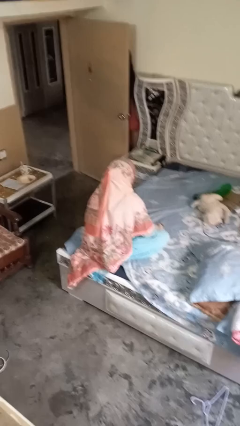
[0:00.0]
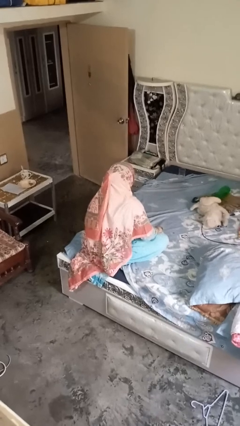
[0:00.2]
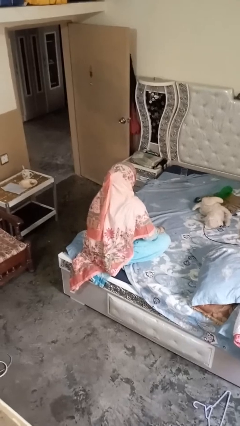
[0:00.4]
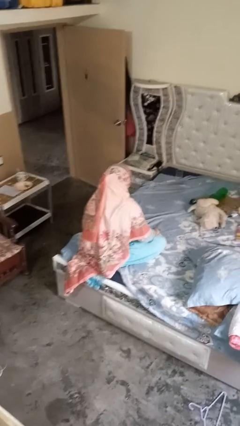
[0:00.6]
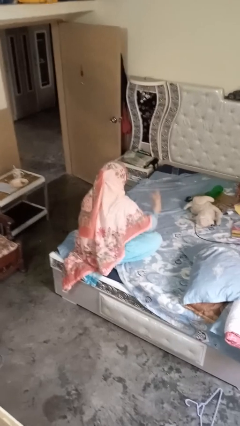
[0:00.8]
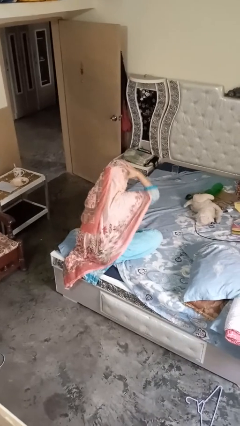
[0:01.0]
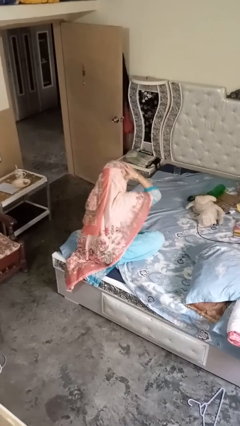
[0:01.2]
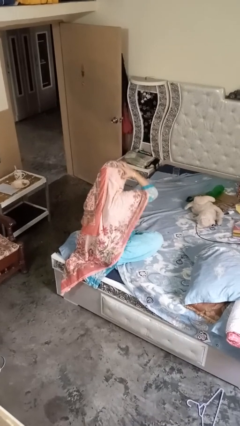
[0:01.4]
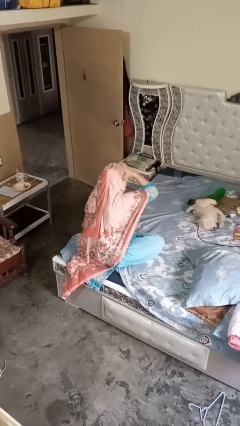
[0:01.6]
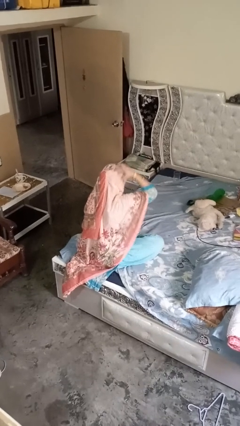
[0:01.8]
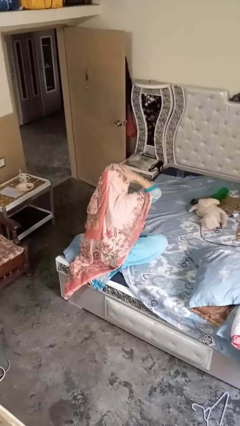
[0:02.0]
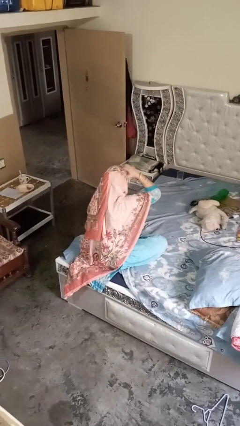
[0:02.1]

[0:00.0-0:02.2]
person strokes hair

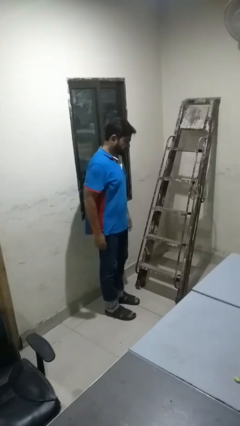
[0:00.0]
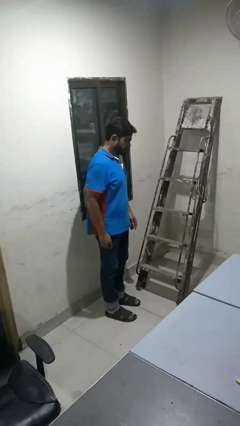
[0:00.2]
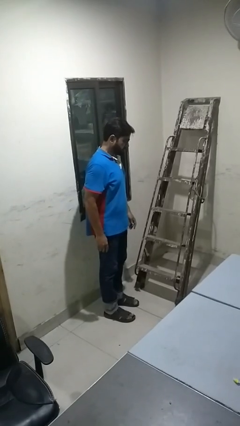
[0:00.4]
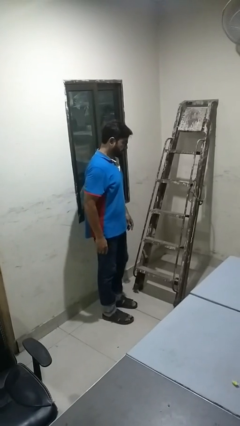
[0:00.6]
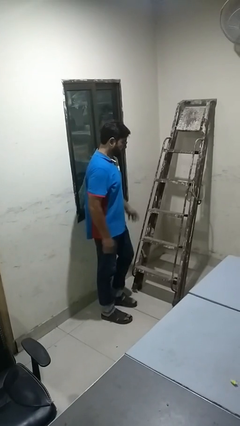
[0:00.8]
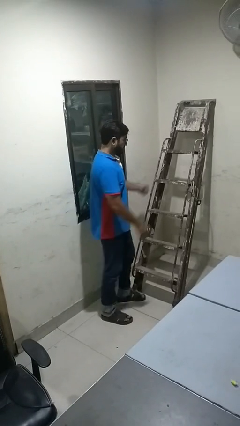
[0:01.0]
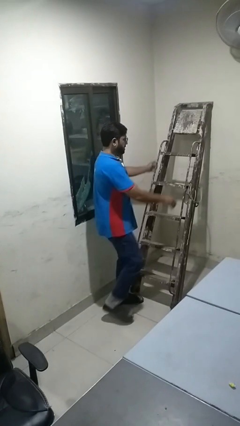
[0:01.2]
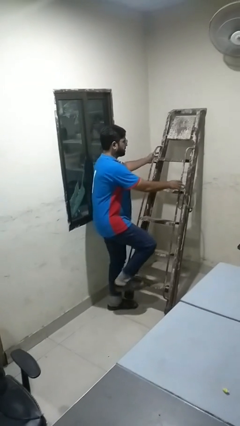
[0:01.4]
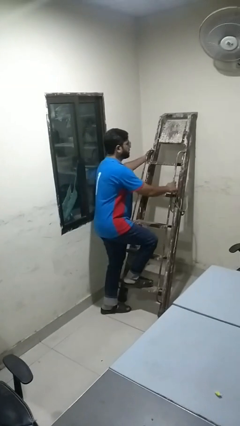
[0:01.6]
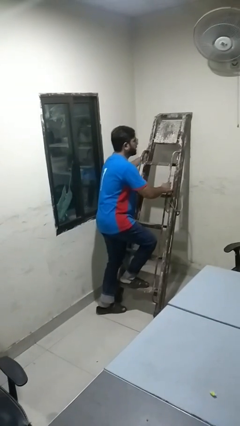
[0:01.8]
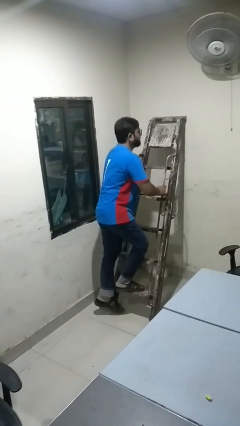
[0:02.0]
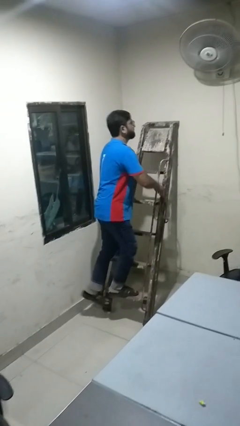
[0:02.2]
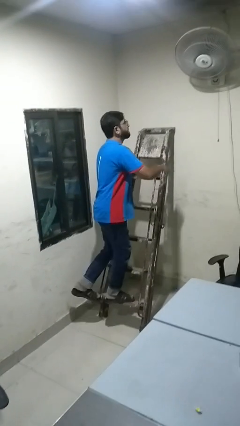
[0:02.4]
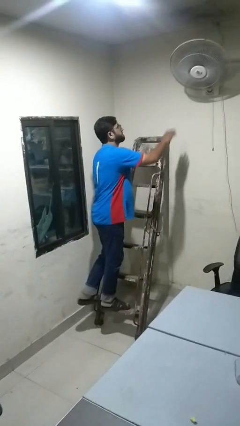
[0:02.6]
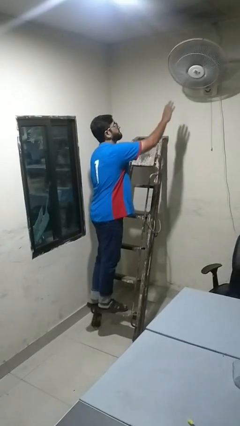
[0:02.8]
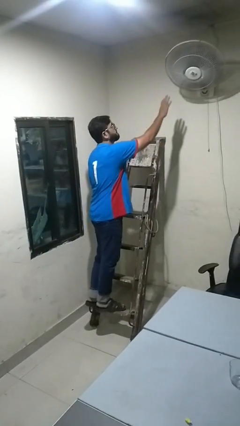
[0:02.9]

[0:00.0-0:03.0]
person climbs up ladder

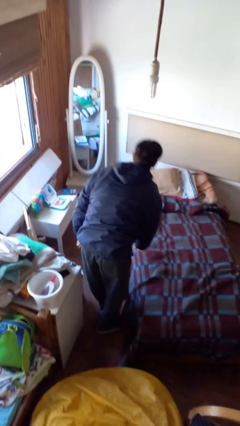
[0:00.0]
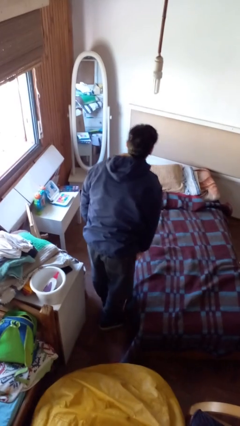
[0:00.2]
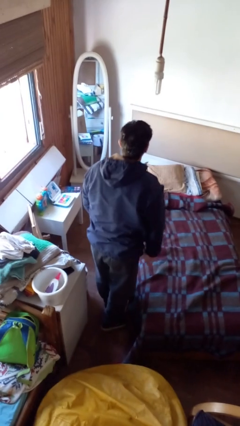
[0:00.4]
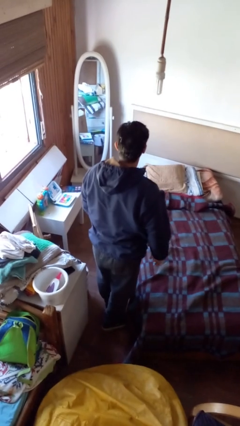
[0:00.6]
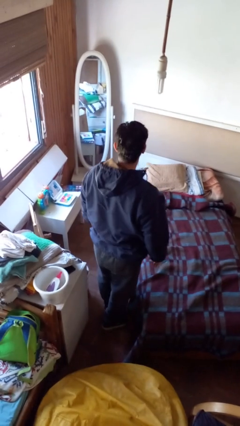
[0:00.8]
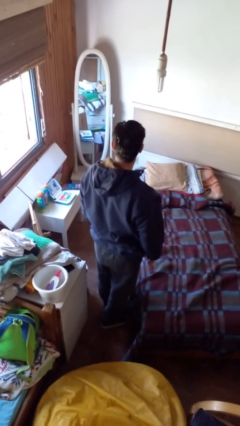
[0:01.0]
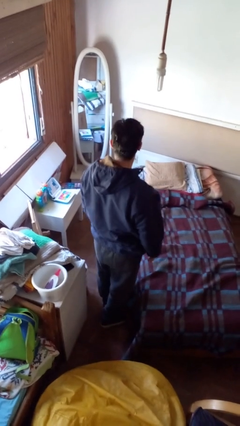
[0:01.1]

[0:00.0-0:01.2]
person stands up

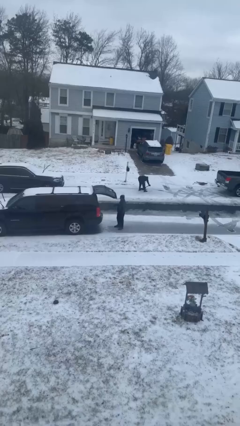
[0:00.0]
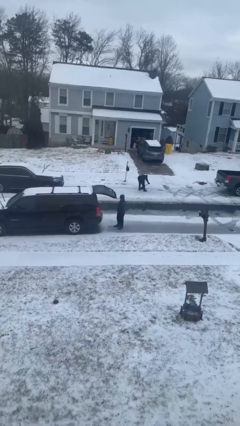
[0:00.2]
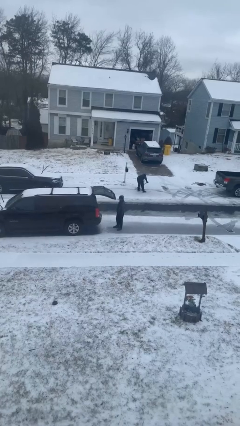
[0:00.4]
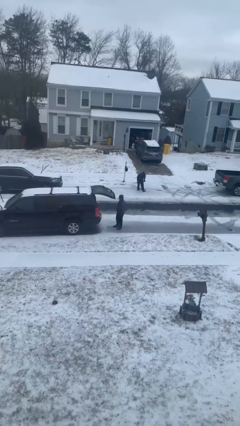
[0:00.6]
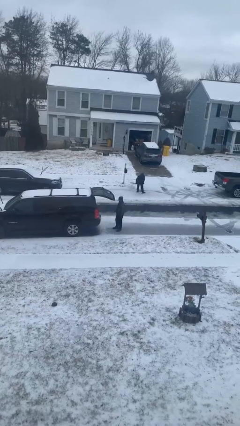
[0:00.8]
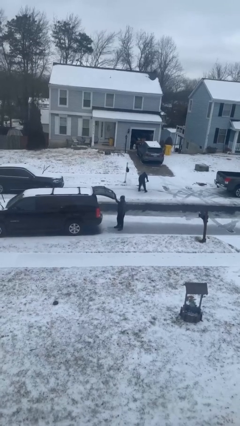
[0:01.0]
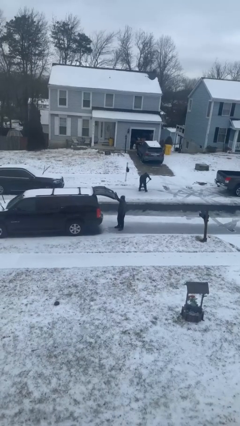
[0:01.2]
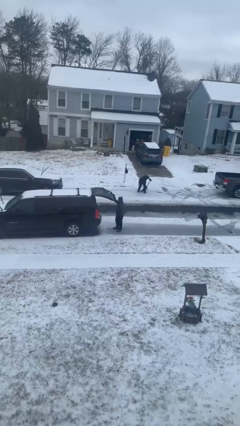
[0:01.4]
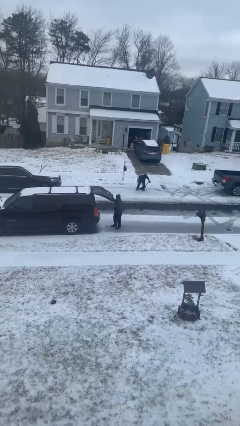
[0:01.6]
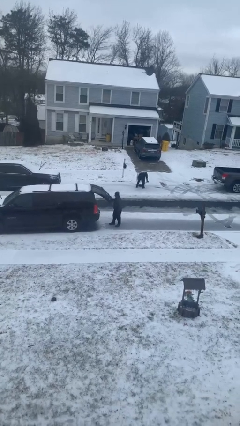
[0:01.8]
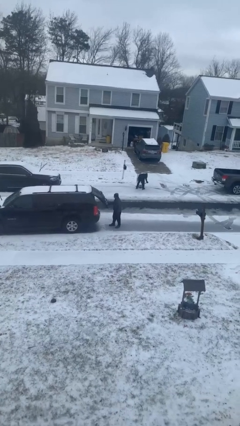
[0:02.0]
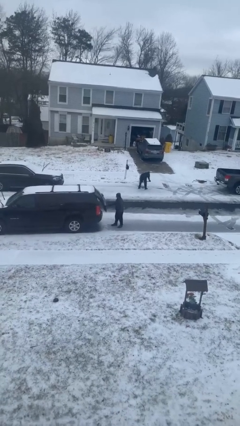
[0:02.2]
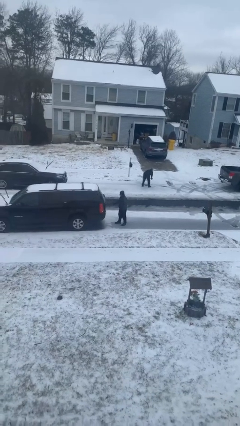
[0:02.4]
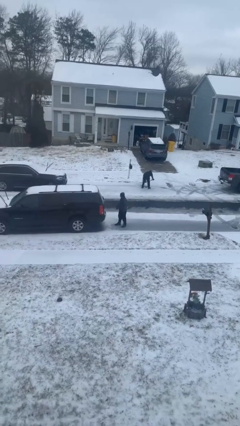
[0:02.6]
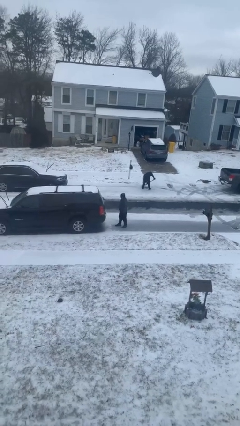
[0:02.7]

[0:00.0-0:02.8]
person closes car trunk

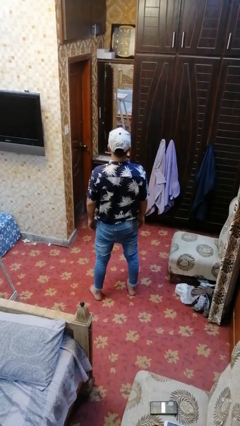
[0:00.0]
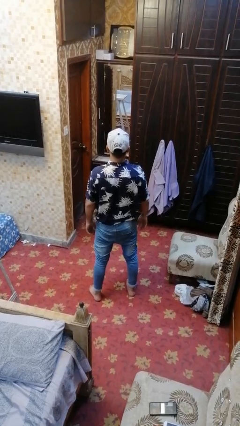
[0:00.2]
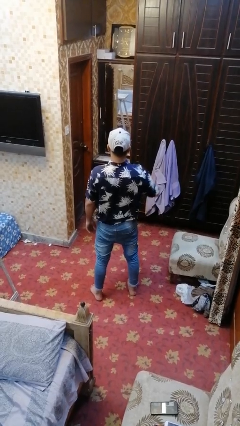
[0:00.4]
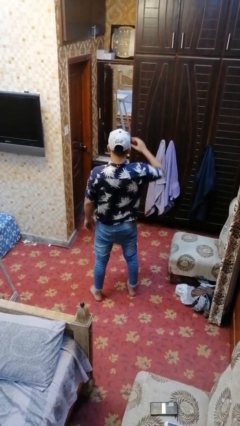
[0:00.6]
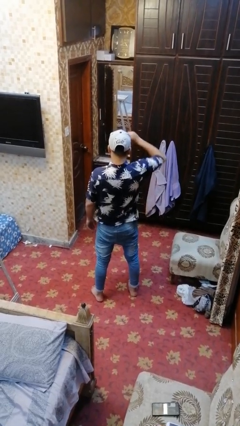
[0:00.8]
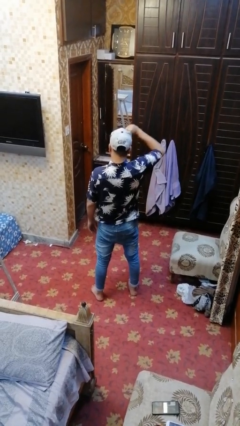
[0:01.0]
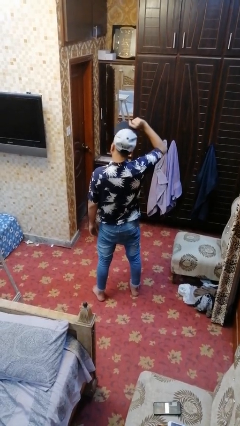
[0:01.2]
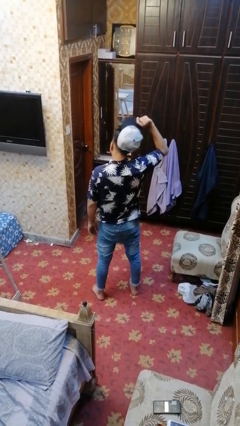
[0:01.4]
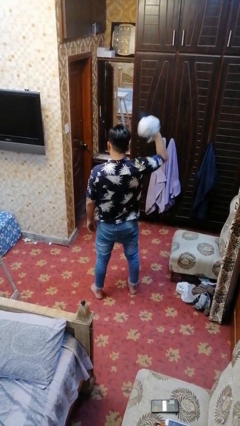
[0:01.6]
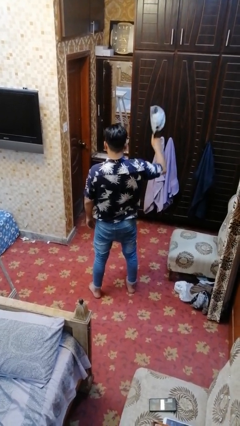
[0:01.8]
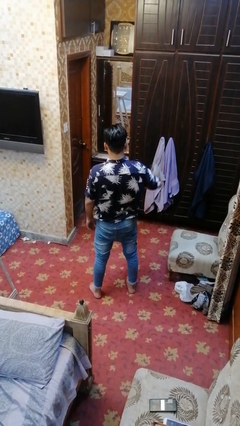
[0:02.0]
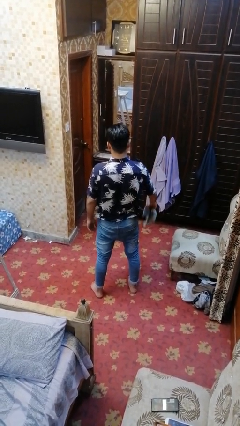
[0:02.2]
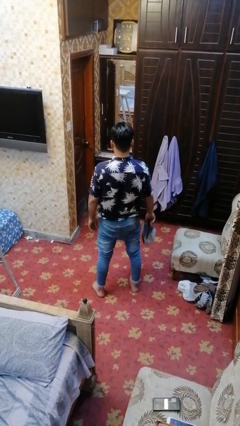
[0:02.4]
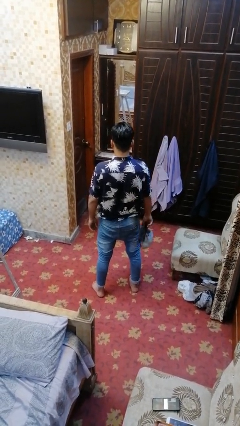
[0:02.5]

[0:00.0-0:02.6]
person takes off hat

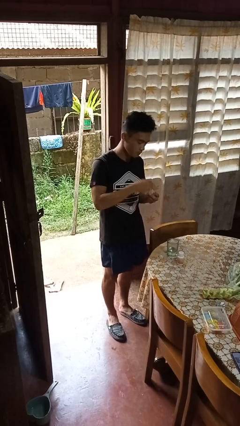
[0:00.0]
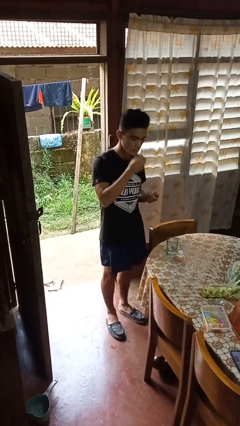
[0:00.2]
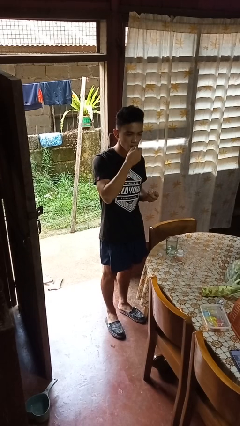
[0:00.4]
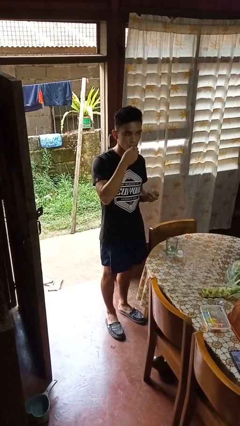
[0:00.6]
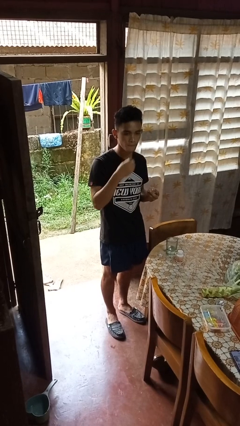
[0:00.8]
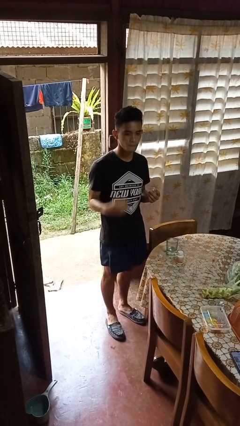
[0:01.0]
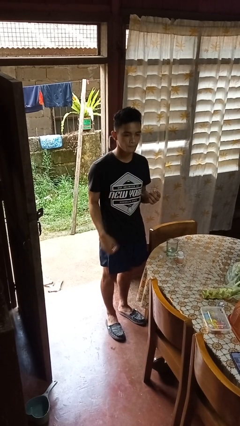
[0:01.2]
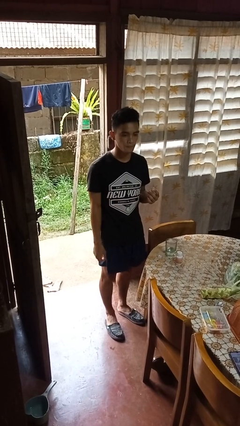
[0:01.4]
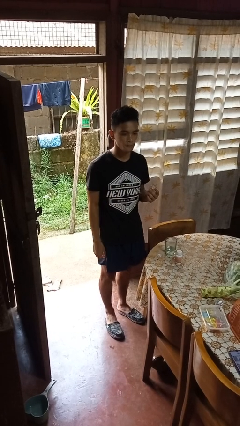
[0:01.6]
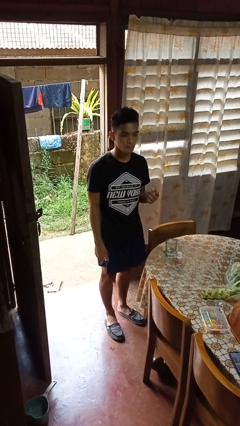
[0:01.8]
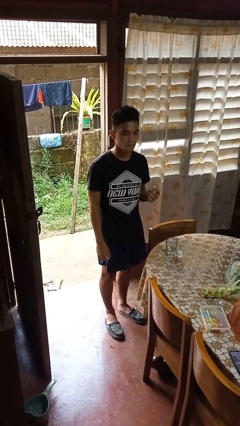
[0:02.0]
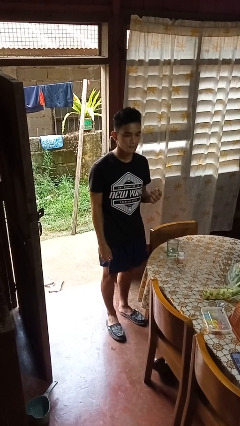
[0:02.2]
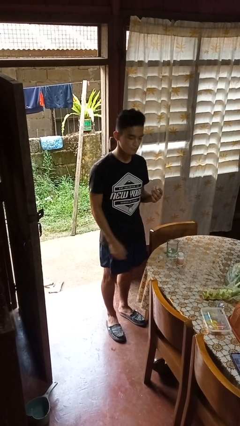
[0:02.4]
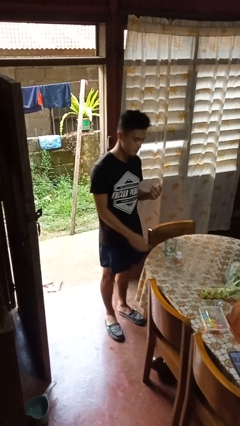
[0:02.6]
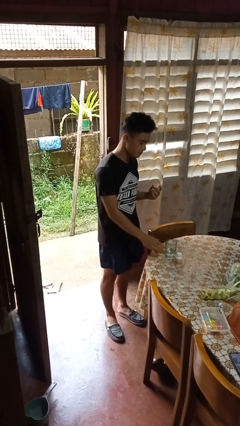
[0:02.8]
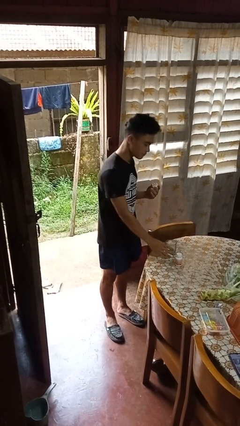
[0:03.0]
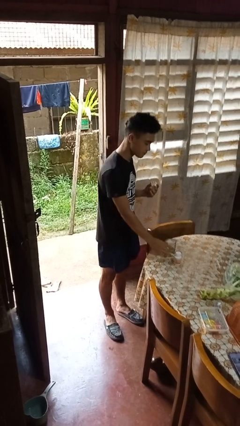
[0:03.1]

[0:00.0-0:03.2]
person takes medicine pills

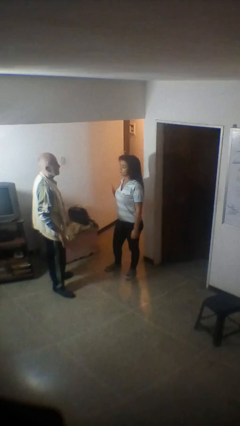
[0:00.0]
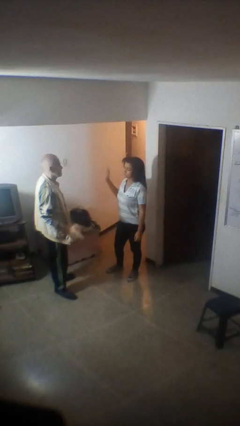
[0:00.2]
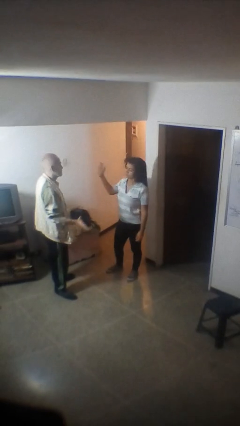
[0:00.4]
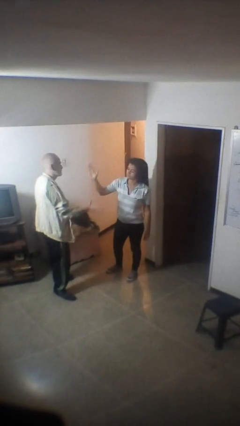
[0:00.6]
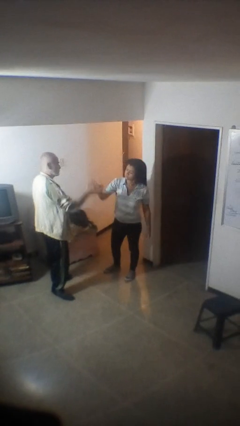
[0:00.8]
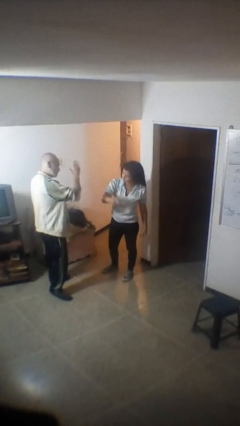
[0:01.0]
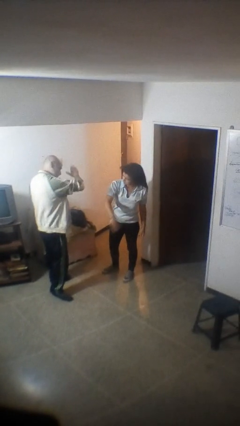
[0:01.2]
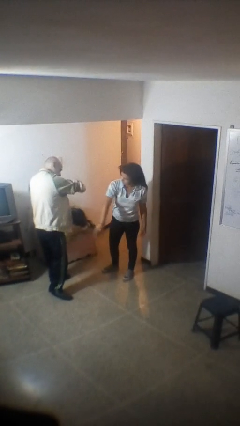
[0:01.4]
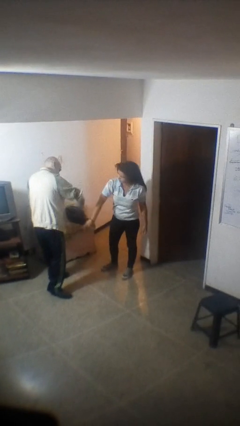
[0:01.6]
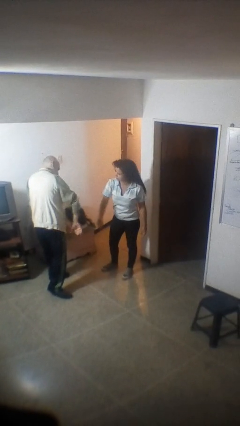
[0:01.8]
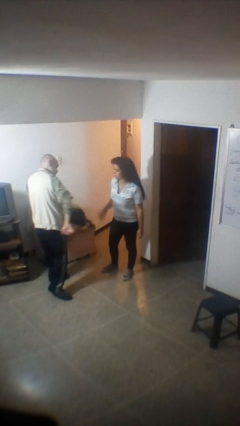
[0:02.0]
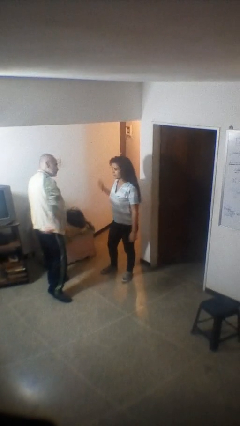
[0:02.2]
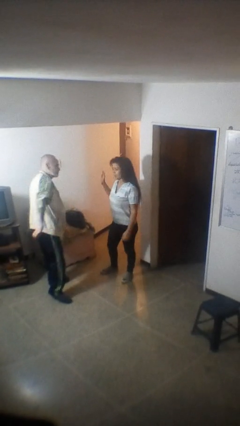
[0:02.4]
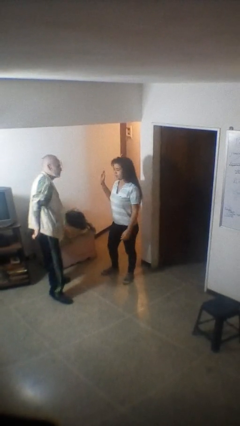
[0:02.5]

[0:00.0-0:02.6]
person highfives hand
